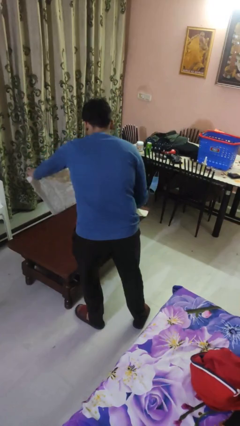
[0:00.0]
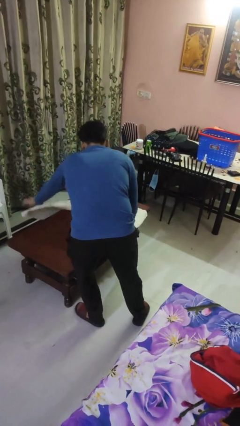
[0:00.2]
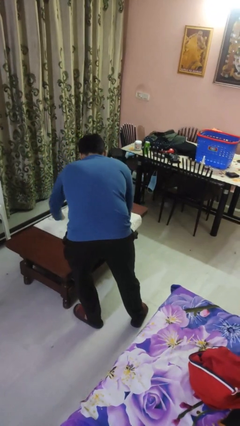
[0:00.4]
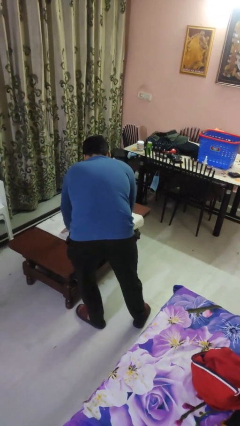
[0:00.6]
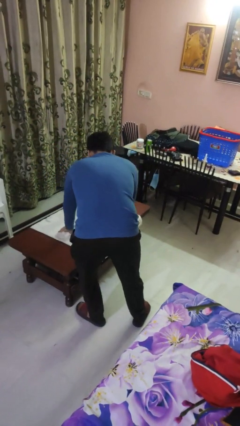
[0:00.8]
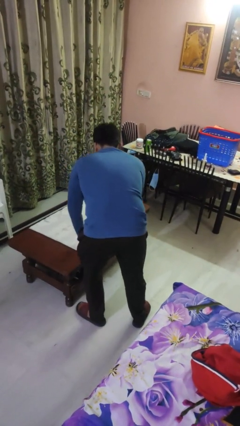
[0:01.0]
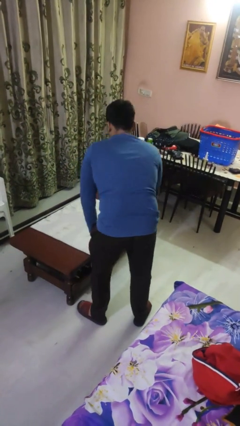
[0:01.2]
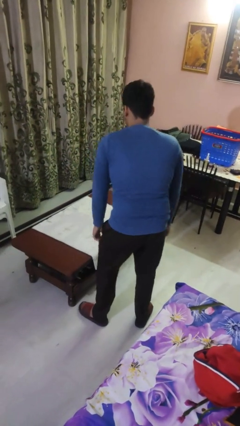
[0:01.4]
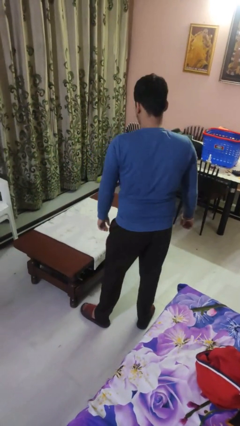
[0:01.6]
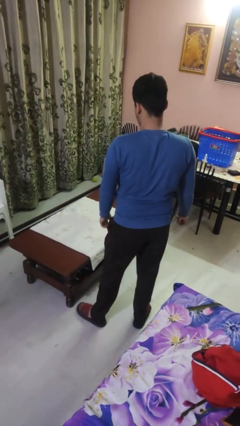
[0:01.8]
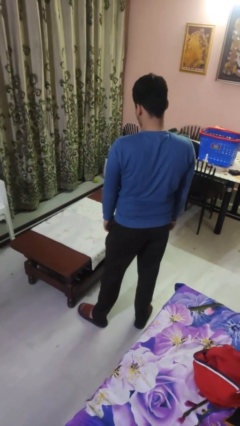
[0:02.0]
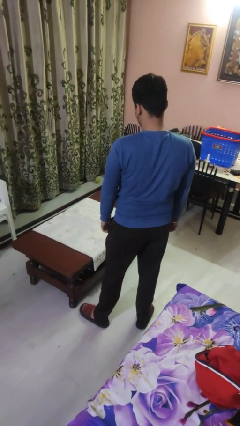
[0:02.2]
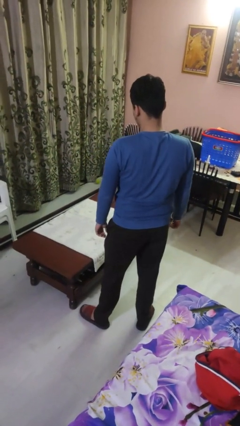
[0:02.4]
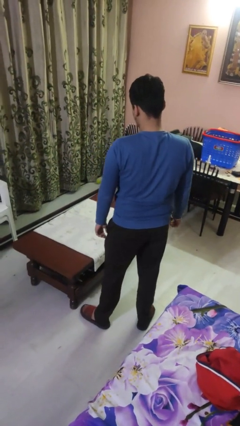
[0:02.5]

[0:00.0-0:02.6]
person spreads tablecloth

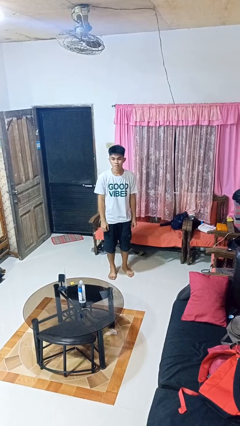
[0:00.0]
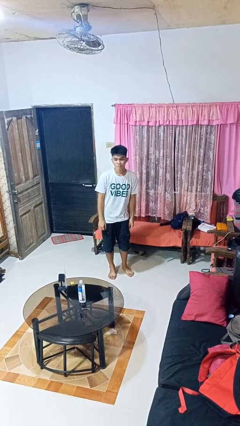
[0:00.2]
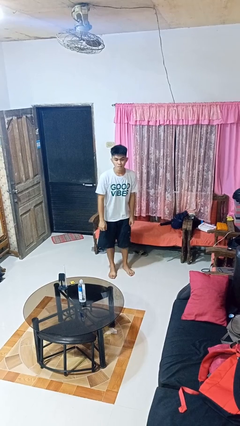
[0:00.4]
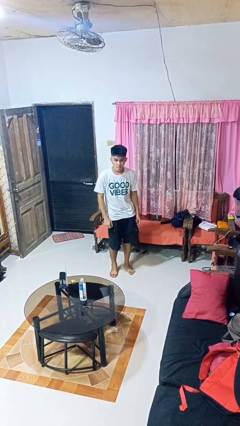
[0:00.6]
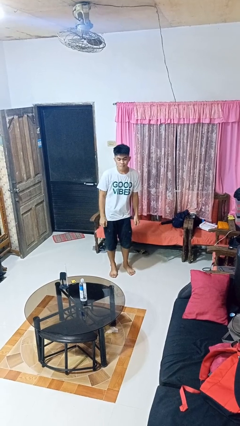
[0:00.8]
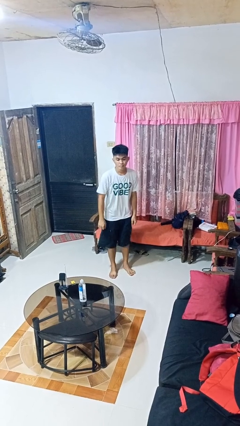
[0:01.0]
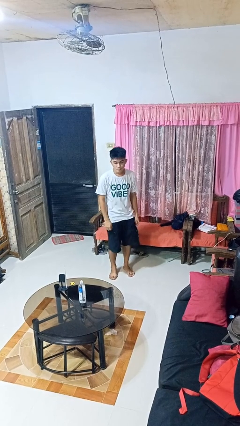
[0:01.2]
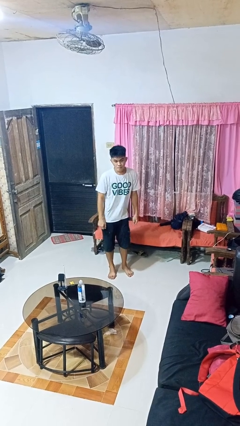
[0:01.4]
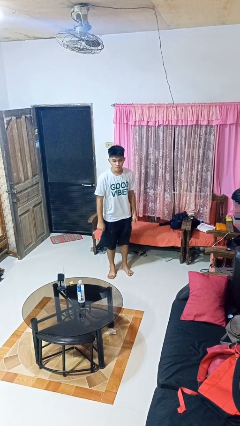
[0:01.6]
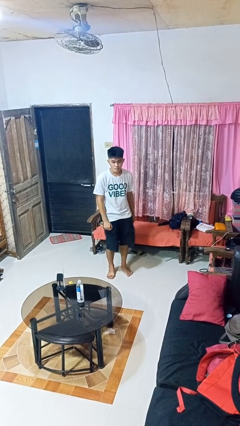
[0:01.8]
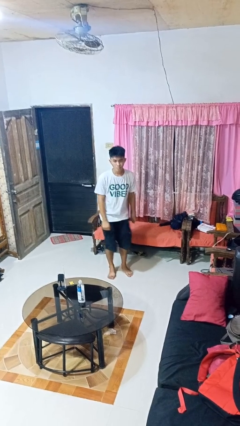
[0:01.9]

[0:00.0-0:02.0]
person wiggles hips

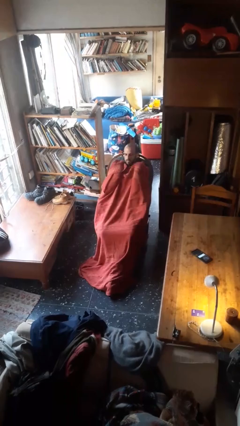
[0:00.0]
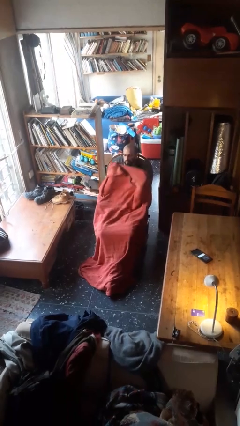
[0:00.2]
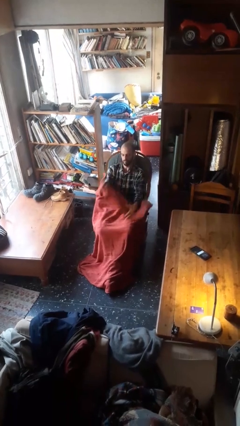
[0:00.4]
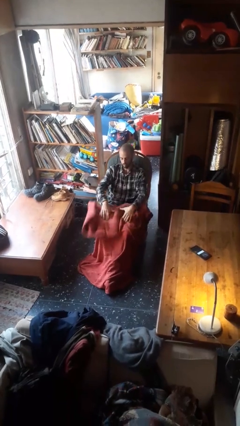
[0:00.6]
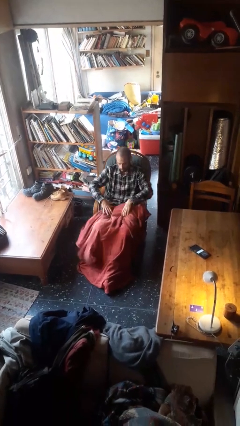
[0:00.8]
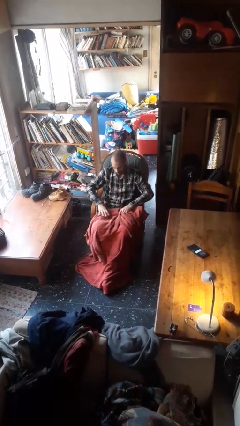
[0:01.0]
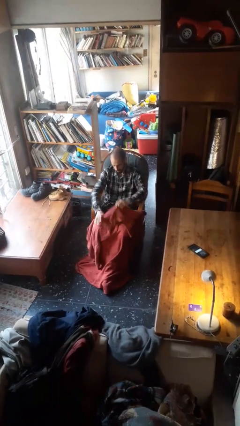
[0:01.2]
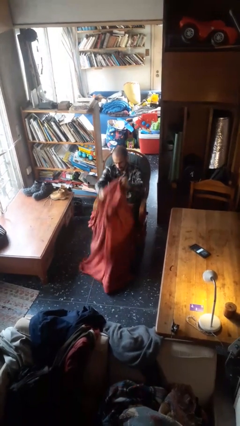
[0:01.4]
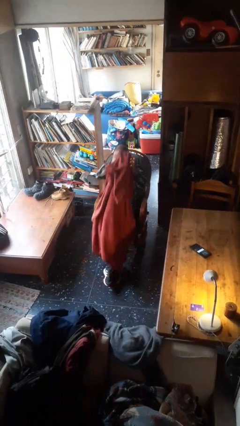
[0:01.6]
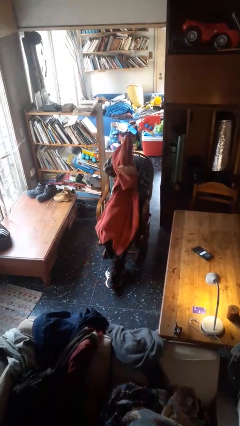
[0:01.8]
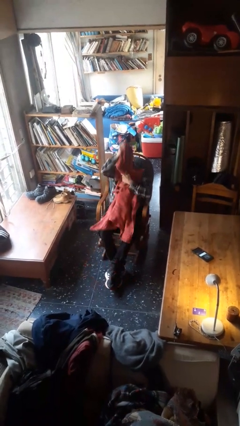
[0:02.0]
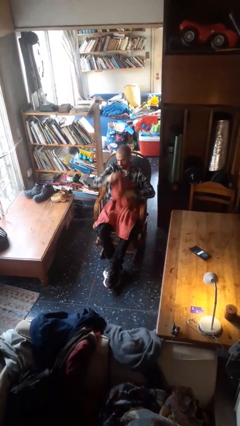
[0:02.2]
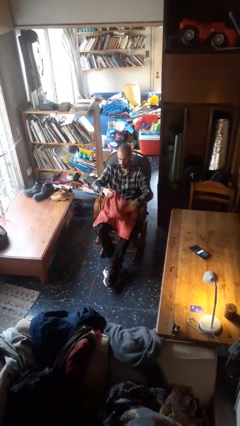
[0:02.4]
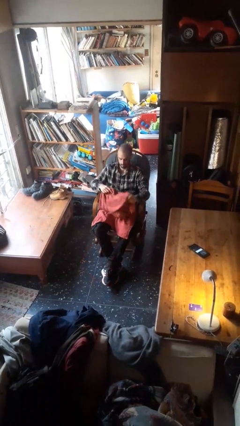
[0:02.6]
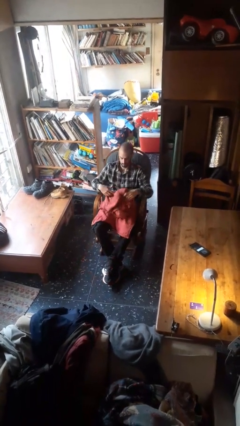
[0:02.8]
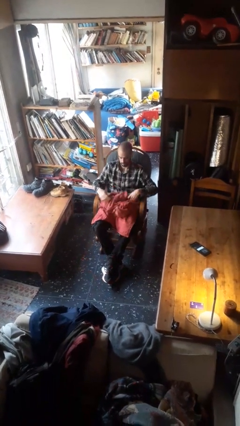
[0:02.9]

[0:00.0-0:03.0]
person uncovers with blanket

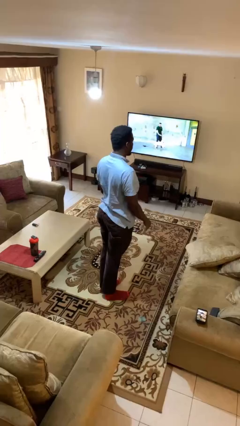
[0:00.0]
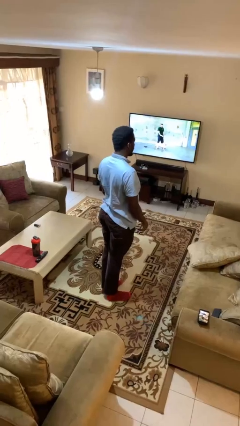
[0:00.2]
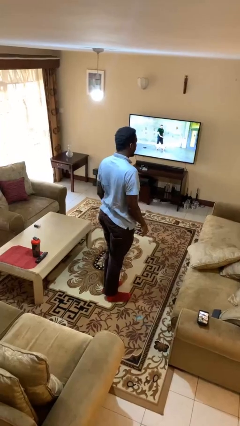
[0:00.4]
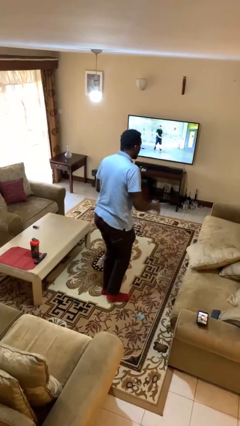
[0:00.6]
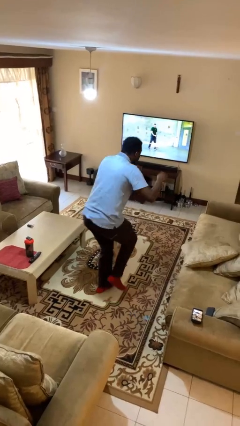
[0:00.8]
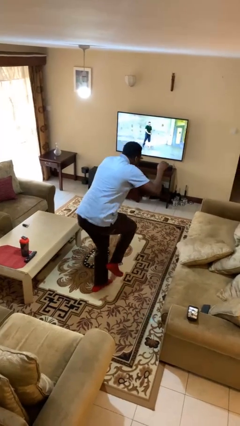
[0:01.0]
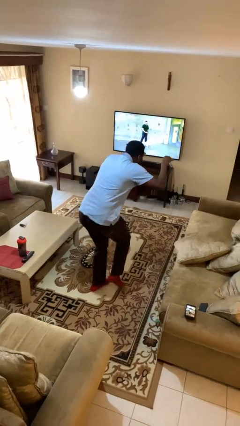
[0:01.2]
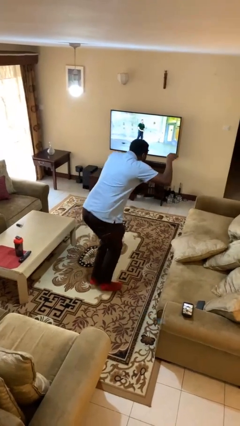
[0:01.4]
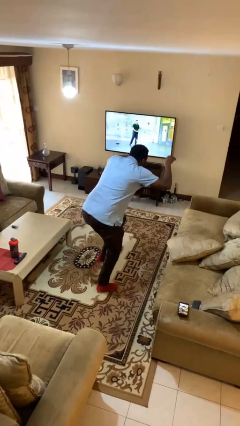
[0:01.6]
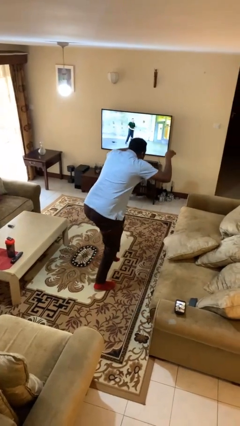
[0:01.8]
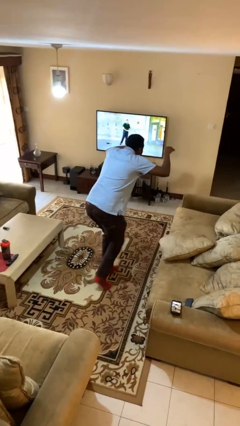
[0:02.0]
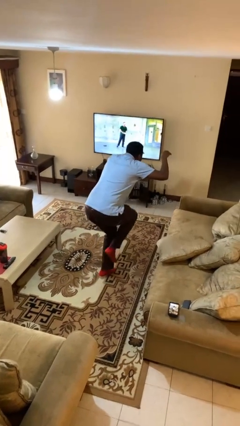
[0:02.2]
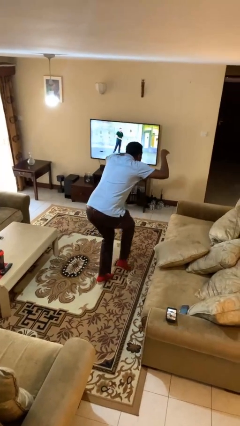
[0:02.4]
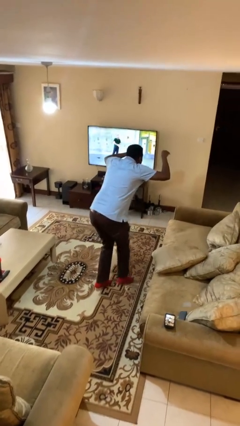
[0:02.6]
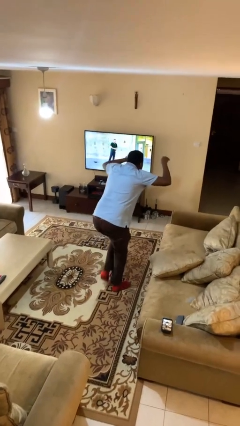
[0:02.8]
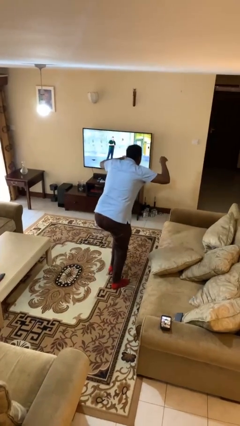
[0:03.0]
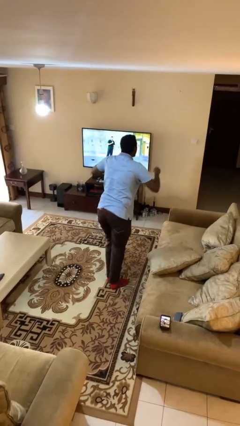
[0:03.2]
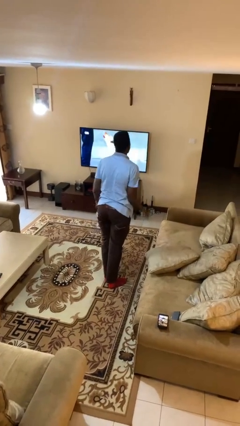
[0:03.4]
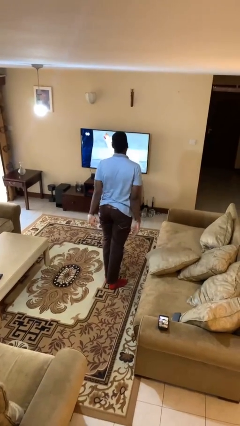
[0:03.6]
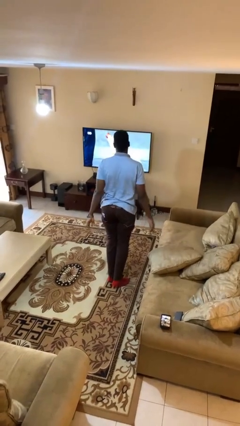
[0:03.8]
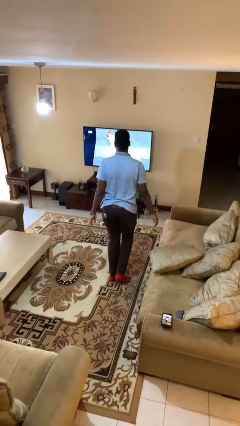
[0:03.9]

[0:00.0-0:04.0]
person walks tiptoe

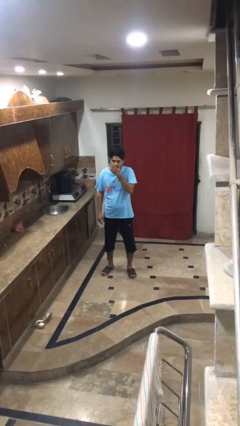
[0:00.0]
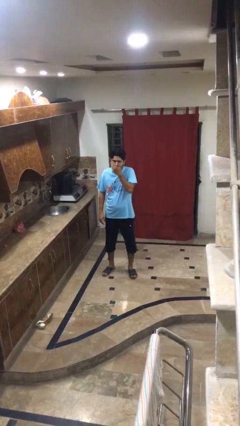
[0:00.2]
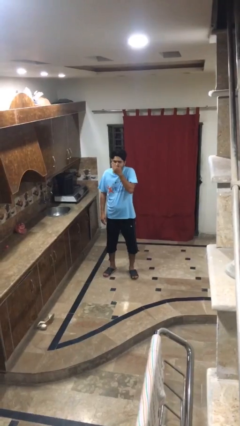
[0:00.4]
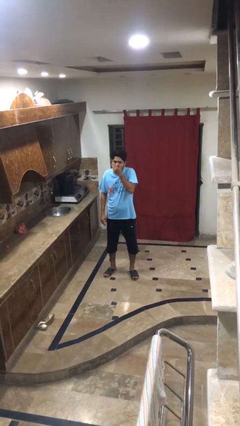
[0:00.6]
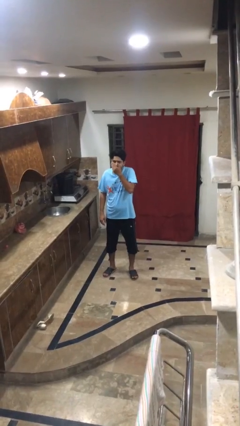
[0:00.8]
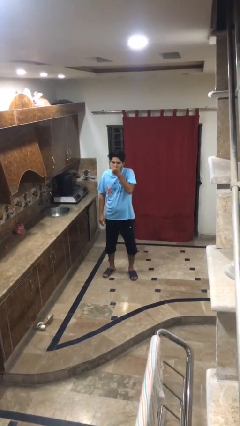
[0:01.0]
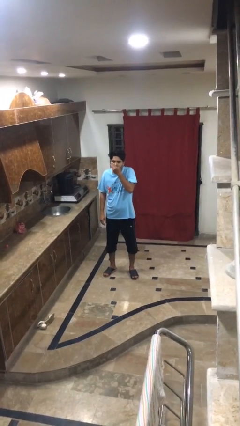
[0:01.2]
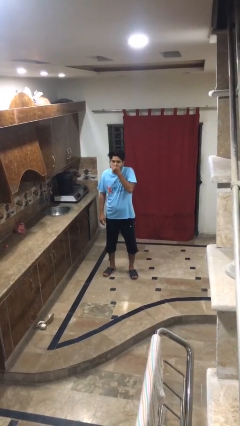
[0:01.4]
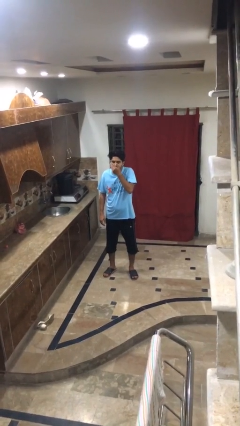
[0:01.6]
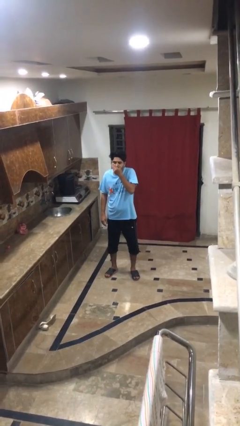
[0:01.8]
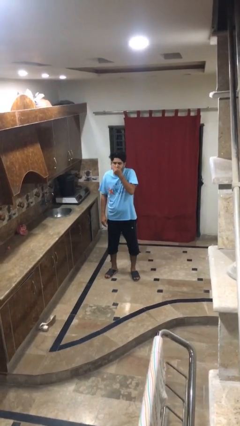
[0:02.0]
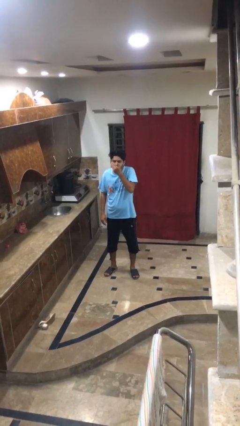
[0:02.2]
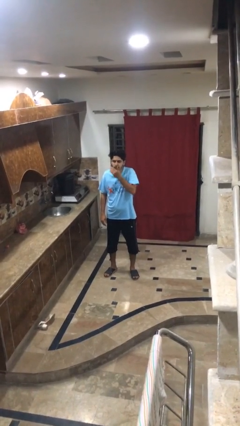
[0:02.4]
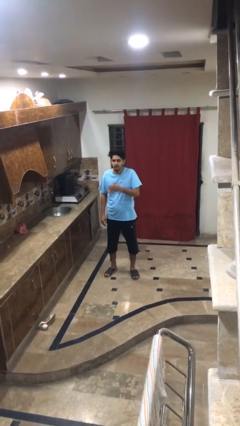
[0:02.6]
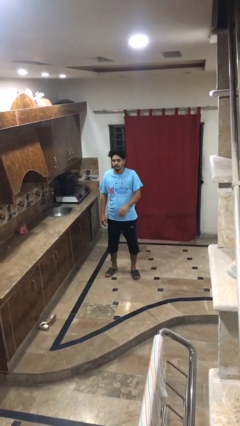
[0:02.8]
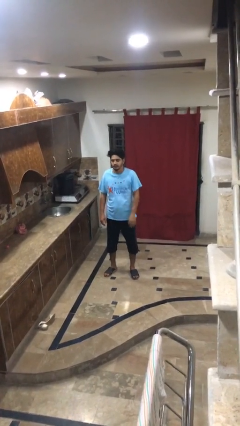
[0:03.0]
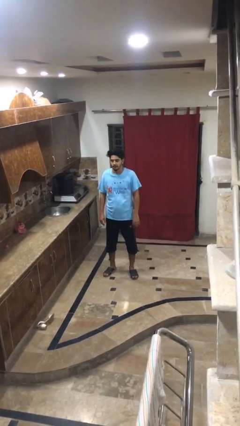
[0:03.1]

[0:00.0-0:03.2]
person sneezes into hand

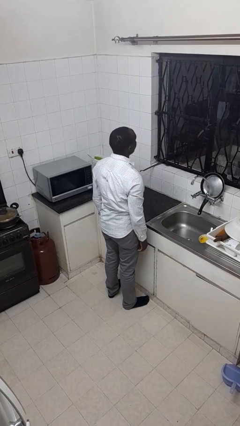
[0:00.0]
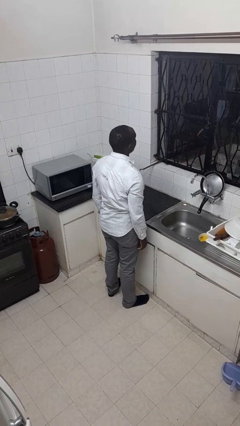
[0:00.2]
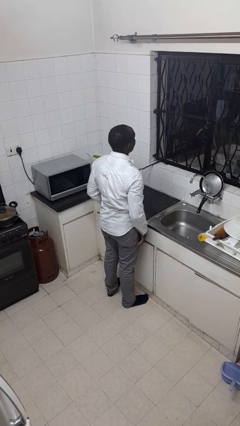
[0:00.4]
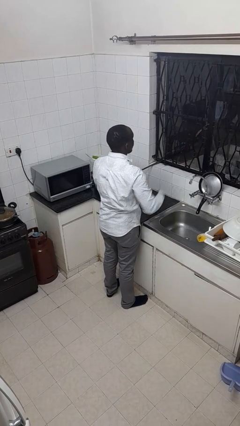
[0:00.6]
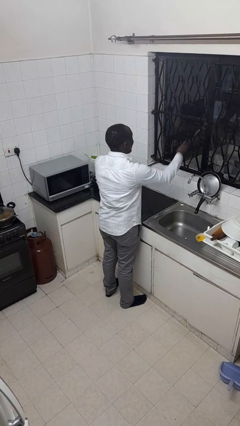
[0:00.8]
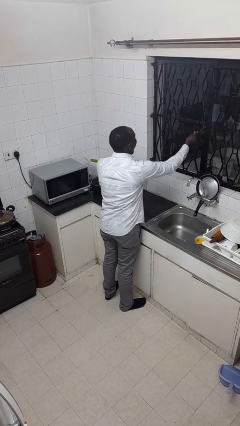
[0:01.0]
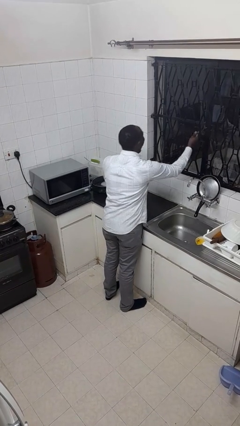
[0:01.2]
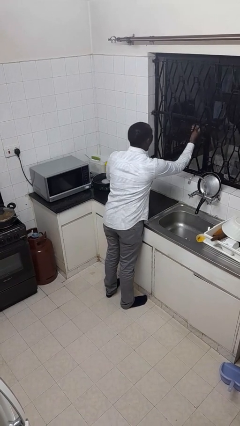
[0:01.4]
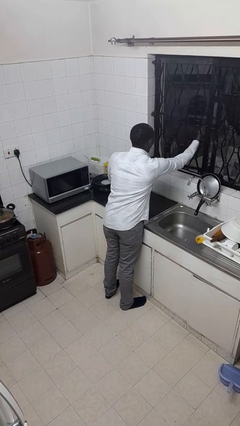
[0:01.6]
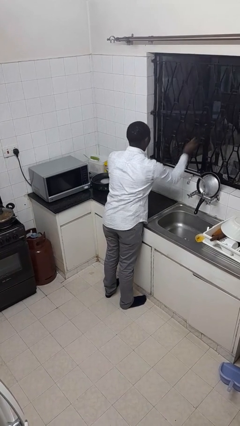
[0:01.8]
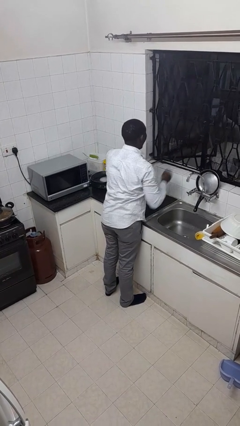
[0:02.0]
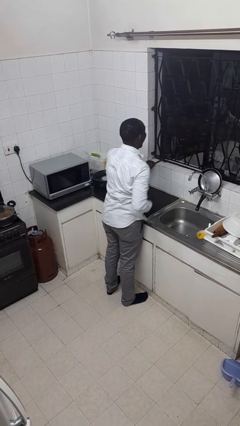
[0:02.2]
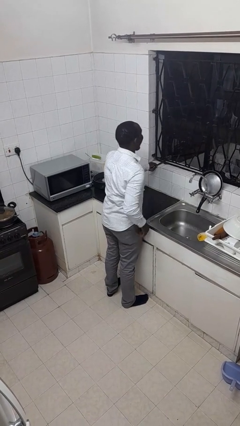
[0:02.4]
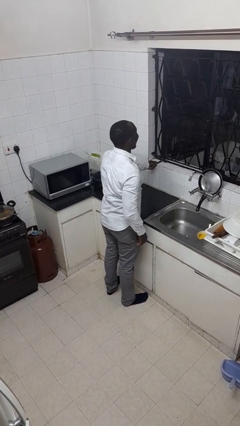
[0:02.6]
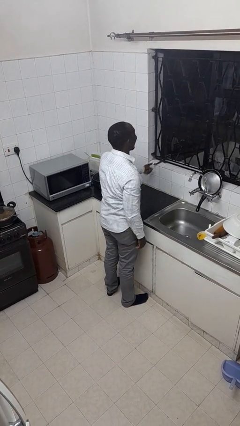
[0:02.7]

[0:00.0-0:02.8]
person opens home window
